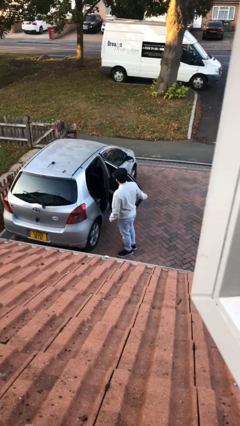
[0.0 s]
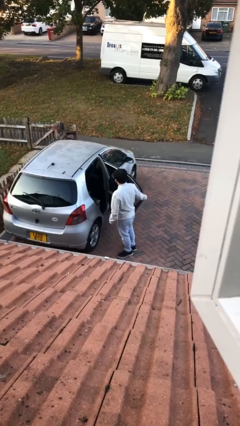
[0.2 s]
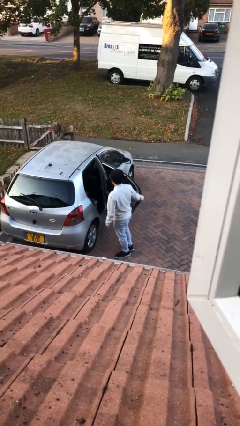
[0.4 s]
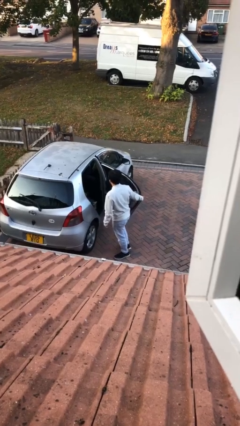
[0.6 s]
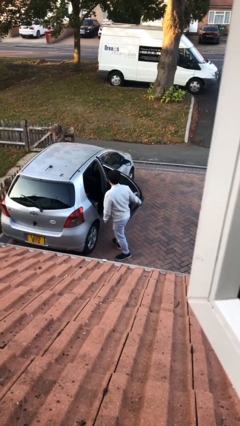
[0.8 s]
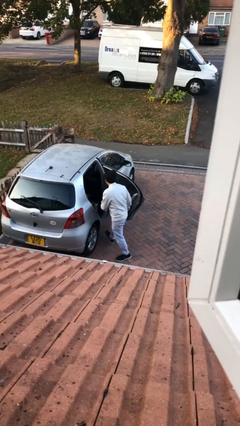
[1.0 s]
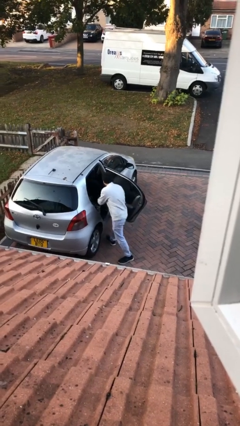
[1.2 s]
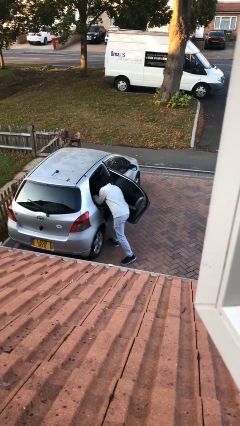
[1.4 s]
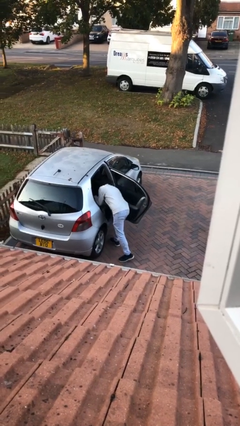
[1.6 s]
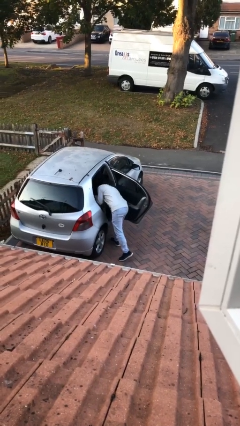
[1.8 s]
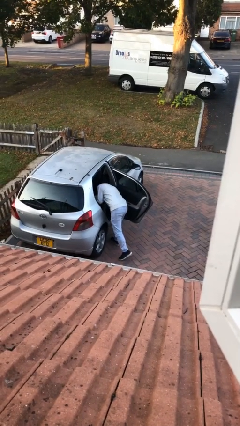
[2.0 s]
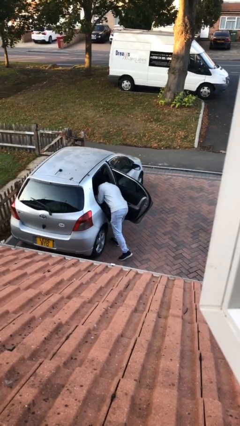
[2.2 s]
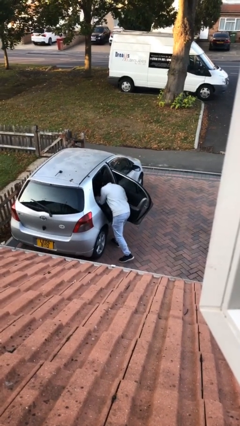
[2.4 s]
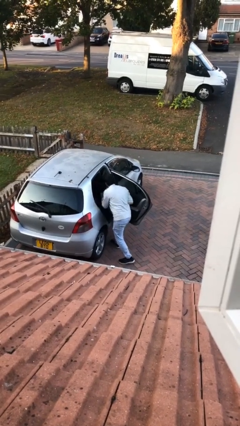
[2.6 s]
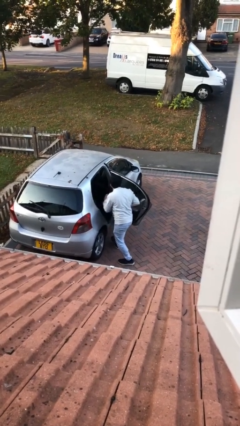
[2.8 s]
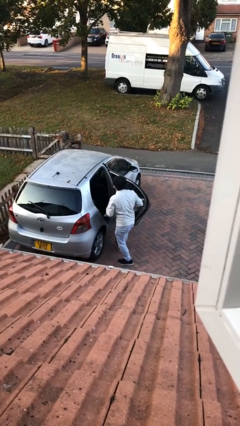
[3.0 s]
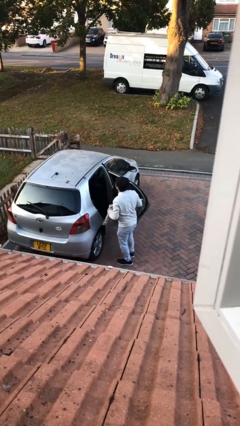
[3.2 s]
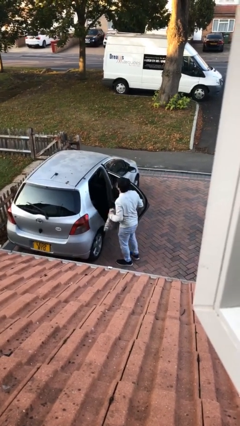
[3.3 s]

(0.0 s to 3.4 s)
person unloads car

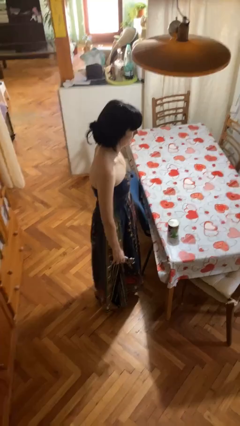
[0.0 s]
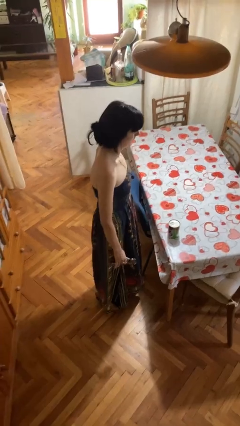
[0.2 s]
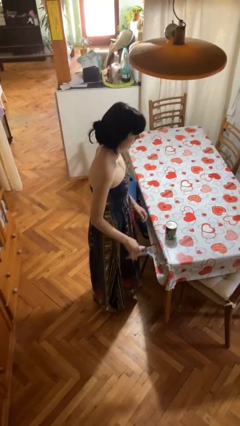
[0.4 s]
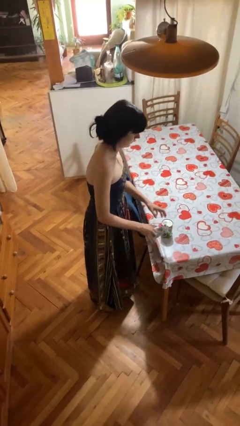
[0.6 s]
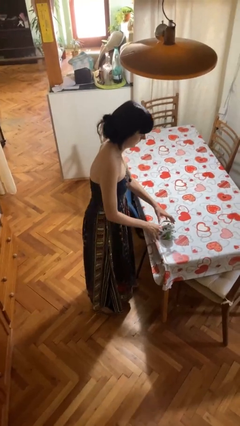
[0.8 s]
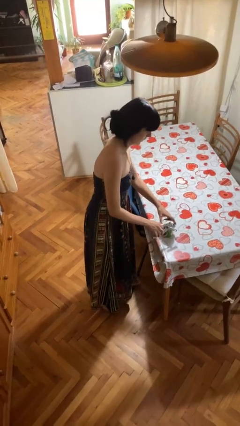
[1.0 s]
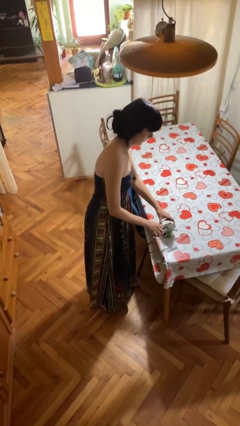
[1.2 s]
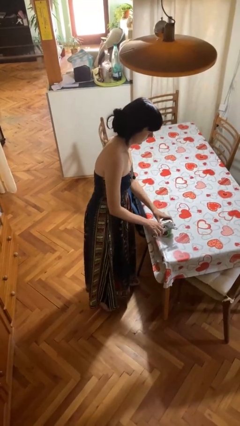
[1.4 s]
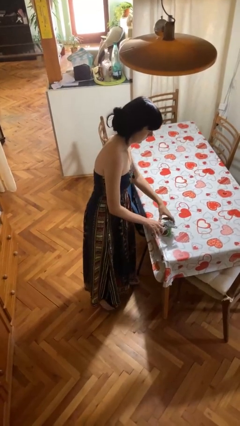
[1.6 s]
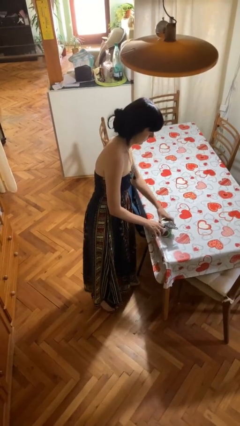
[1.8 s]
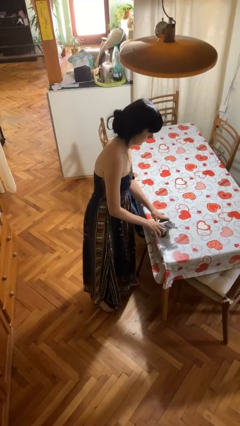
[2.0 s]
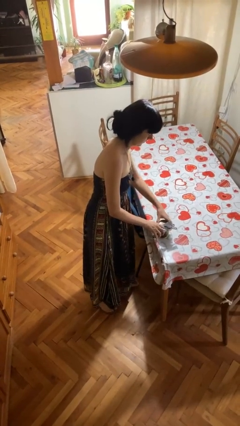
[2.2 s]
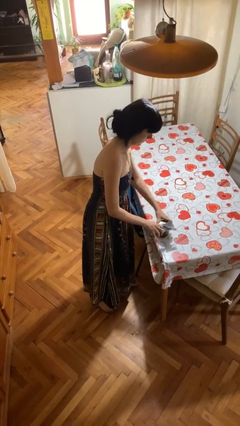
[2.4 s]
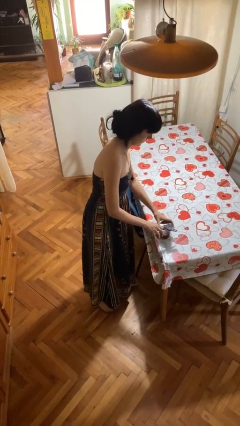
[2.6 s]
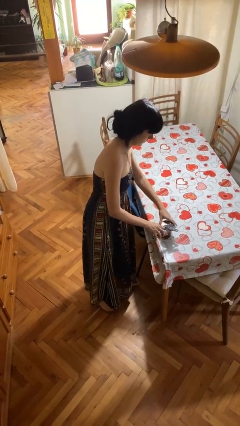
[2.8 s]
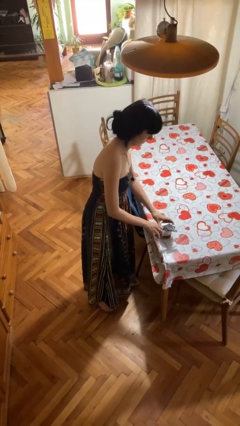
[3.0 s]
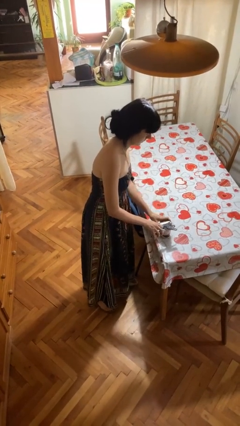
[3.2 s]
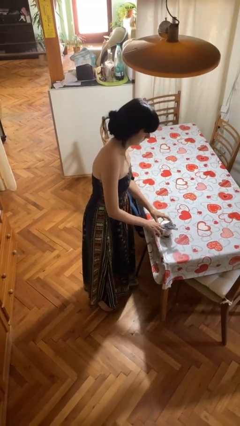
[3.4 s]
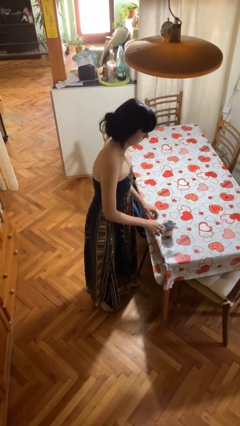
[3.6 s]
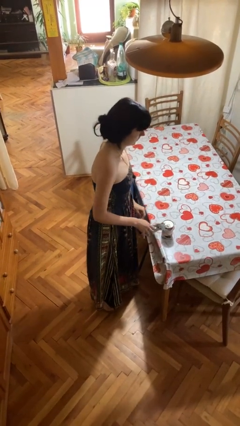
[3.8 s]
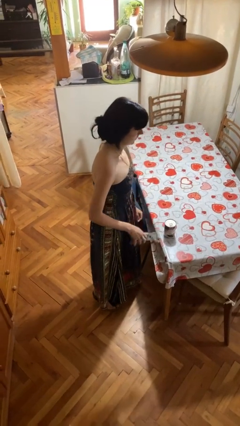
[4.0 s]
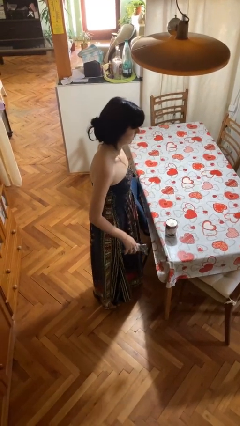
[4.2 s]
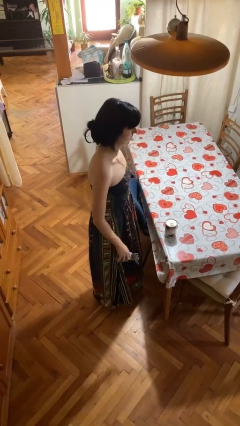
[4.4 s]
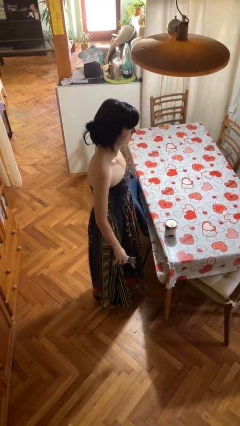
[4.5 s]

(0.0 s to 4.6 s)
person opens can with can opener

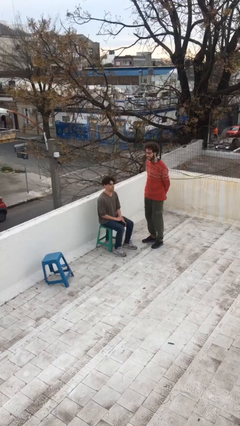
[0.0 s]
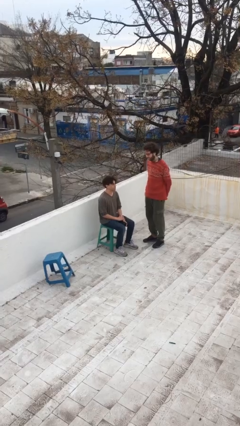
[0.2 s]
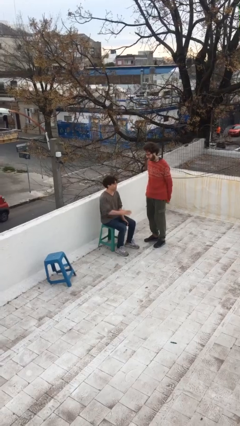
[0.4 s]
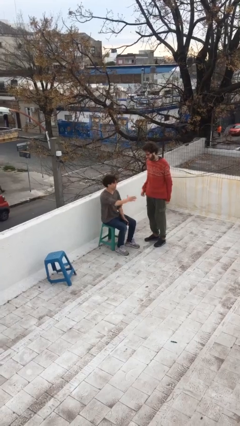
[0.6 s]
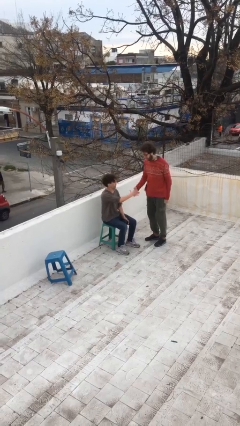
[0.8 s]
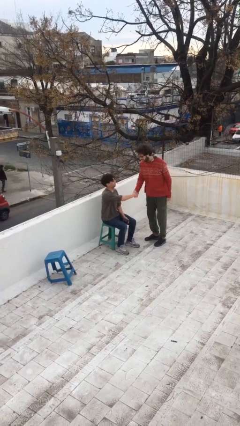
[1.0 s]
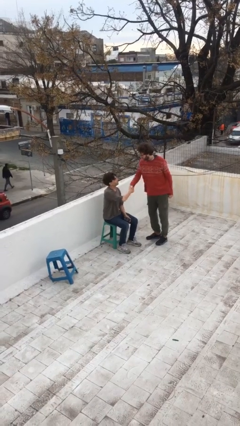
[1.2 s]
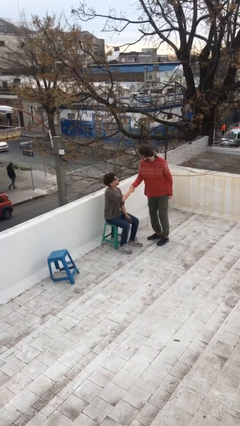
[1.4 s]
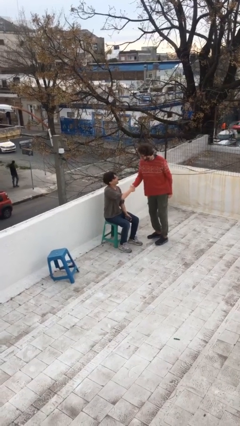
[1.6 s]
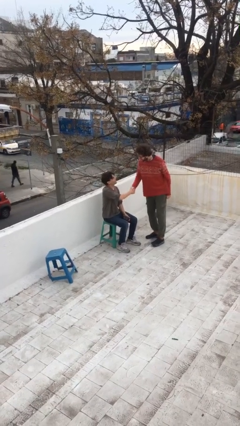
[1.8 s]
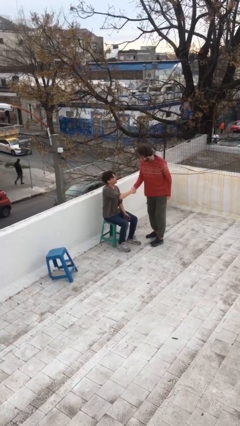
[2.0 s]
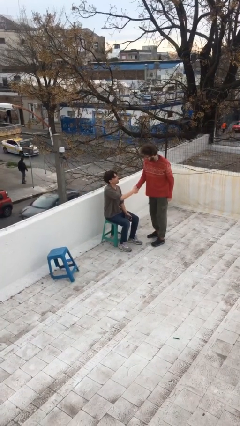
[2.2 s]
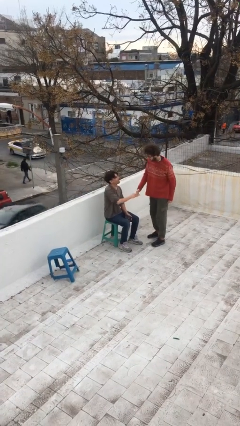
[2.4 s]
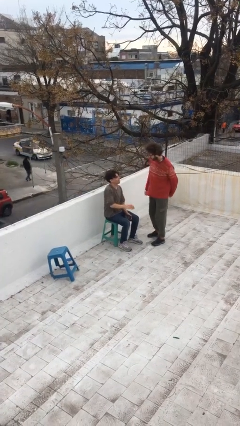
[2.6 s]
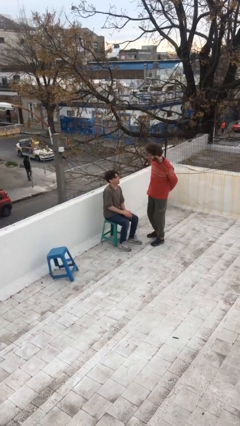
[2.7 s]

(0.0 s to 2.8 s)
person shakes hand

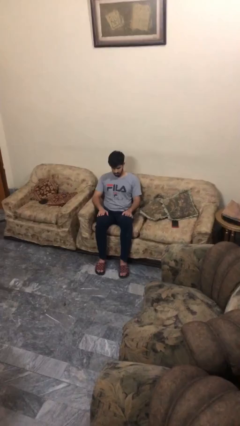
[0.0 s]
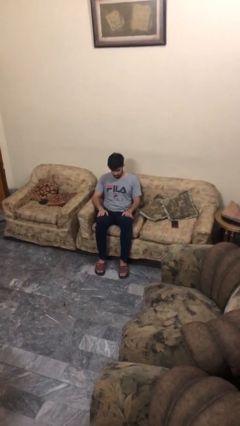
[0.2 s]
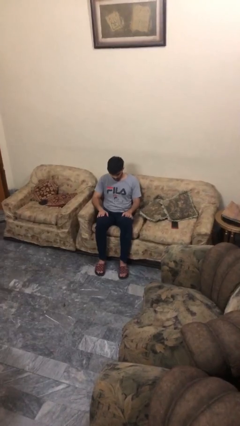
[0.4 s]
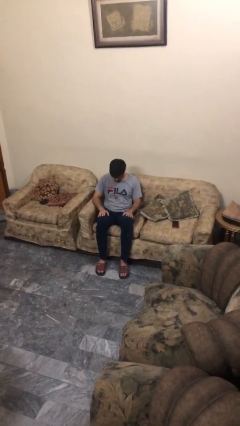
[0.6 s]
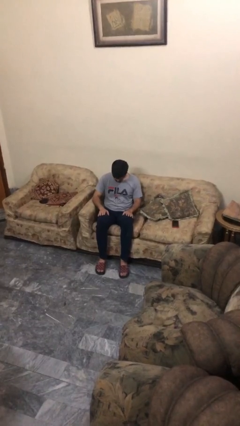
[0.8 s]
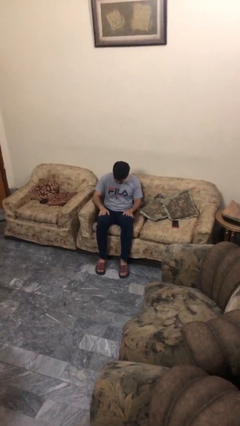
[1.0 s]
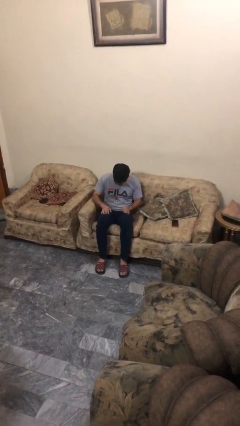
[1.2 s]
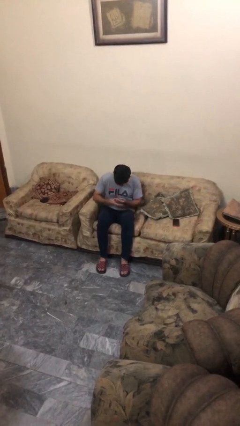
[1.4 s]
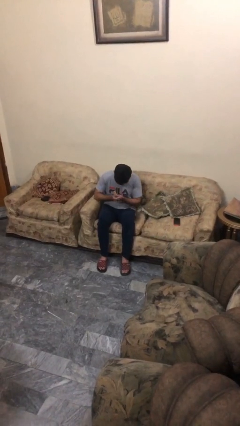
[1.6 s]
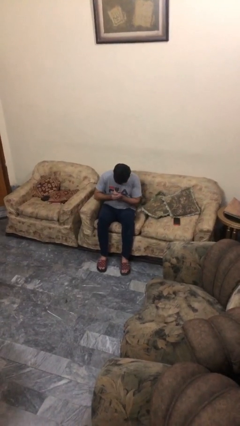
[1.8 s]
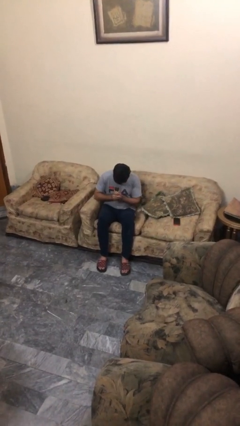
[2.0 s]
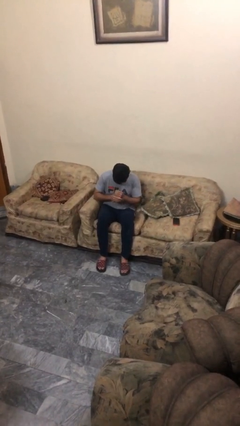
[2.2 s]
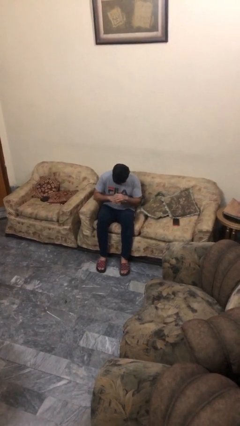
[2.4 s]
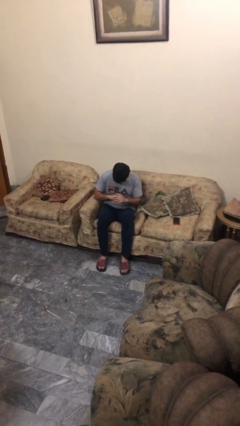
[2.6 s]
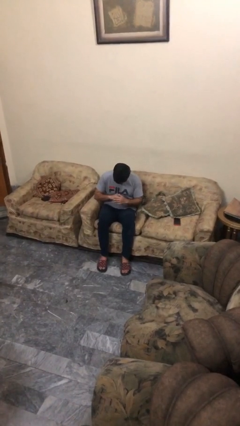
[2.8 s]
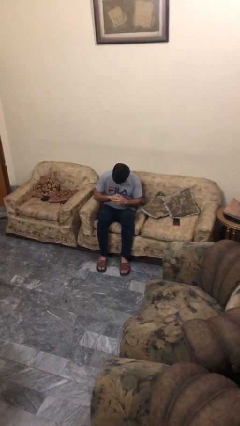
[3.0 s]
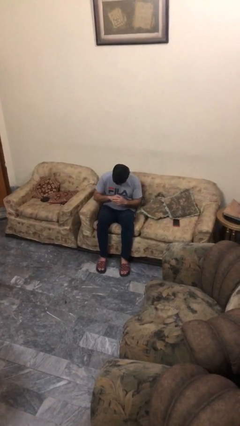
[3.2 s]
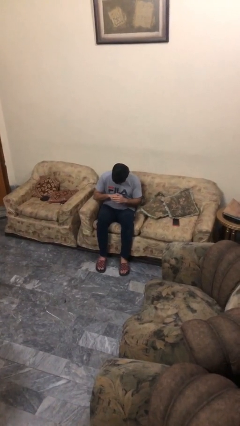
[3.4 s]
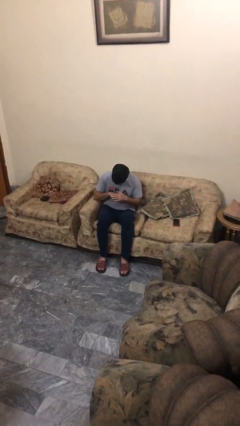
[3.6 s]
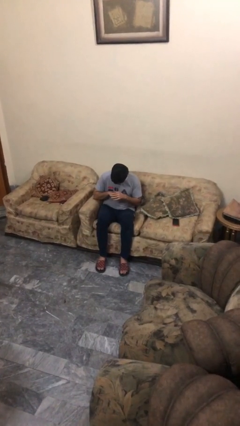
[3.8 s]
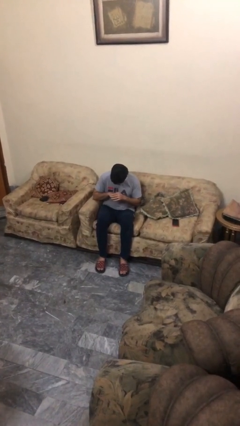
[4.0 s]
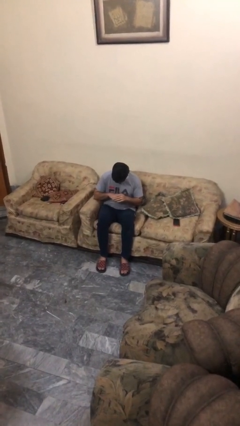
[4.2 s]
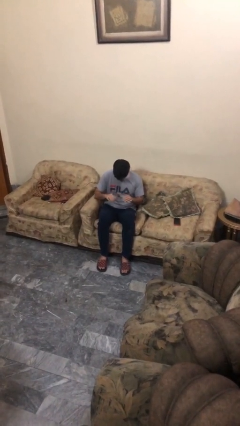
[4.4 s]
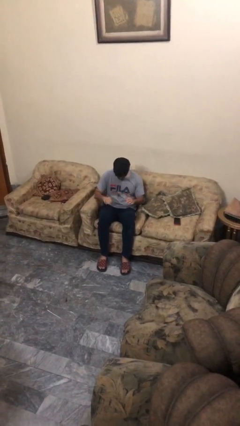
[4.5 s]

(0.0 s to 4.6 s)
person looks at hands in lap

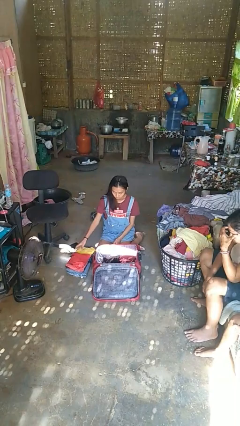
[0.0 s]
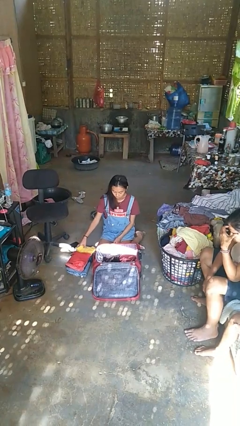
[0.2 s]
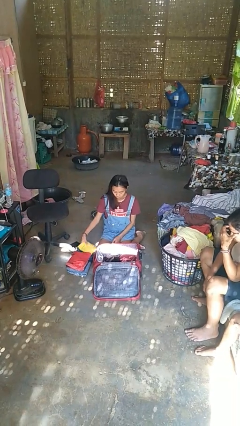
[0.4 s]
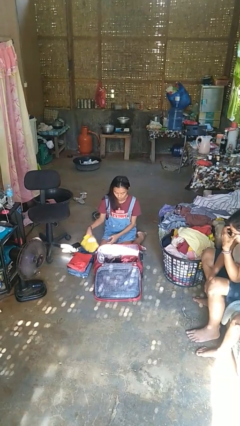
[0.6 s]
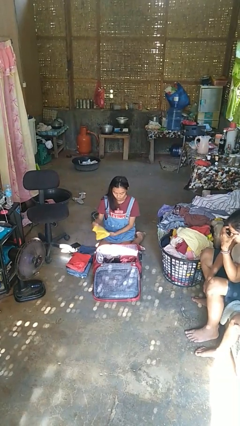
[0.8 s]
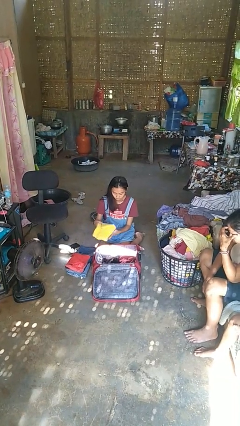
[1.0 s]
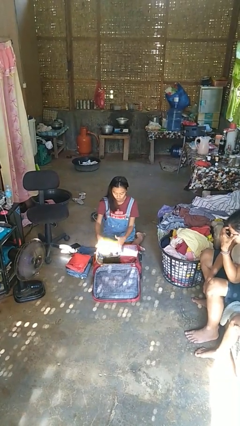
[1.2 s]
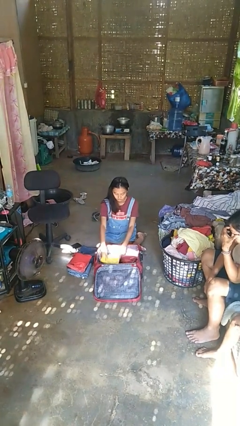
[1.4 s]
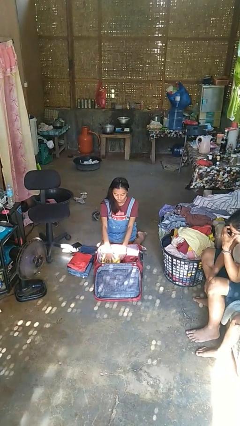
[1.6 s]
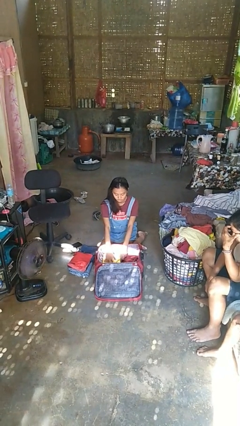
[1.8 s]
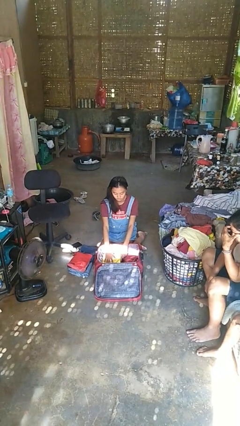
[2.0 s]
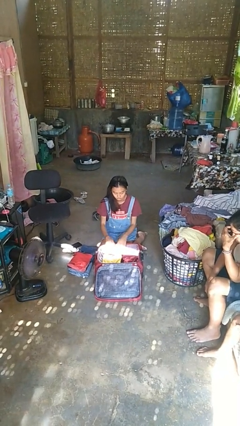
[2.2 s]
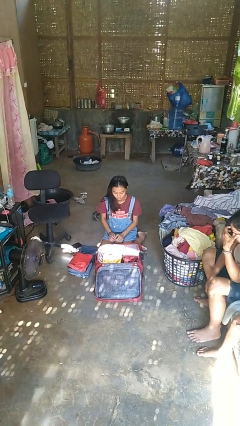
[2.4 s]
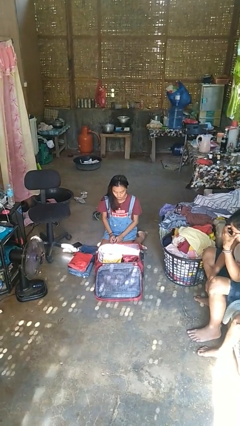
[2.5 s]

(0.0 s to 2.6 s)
person loads clothes into suitcase
